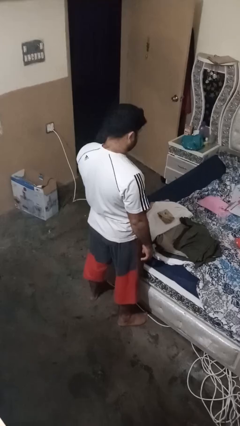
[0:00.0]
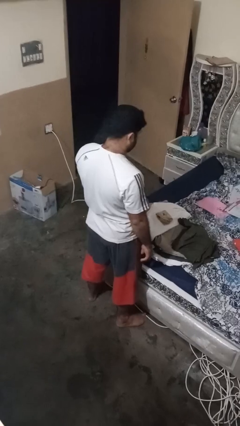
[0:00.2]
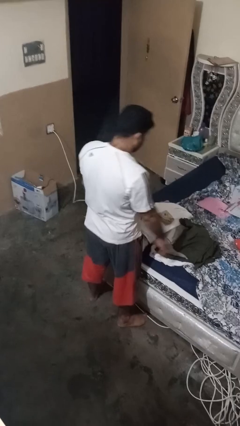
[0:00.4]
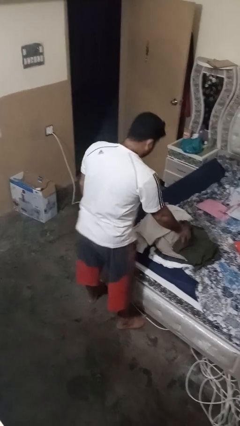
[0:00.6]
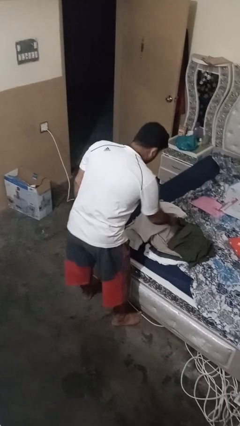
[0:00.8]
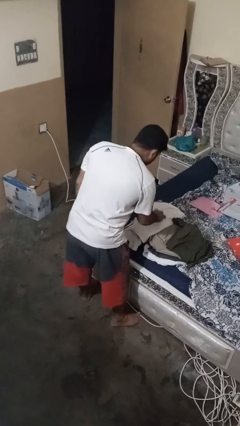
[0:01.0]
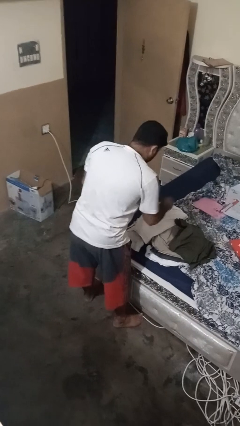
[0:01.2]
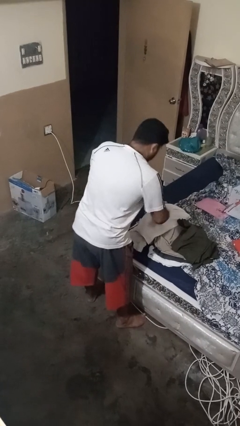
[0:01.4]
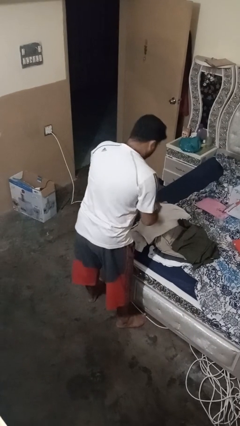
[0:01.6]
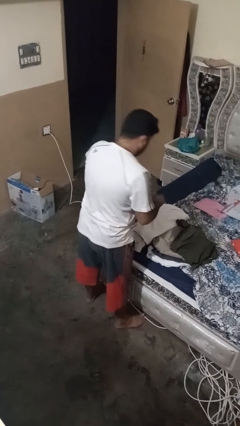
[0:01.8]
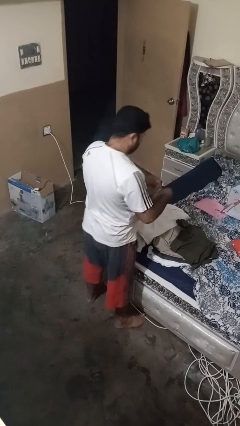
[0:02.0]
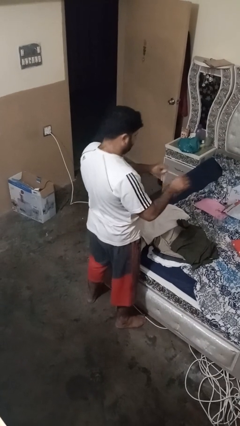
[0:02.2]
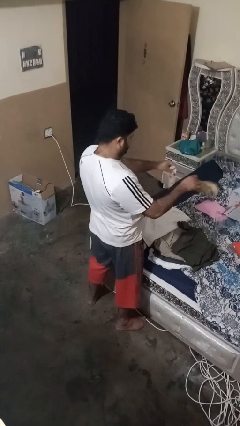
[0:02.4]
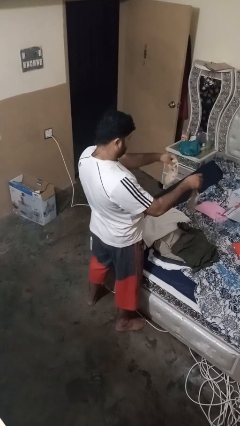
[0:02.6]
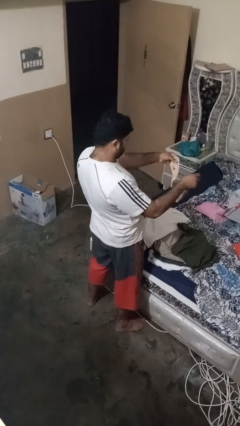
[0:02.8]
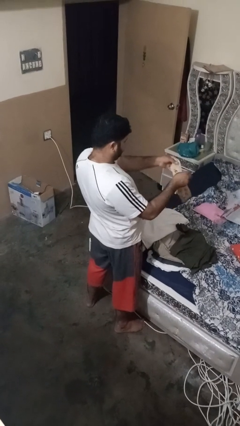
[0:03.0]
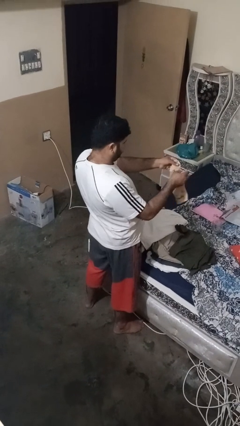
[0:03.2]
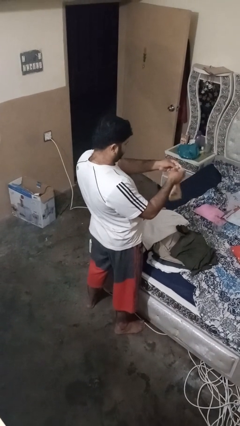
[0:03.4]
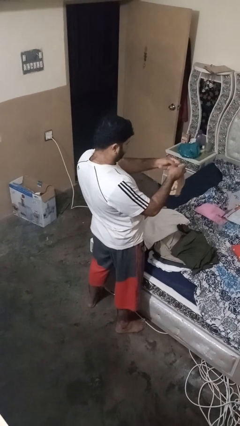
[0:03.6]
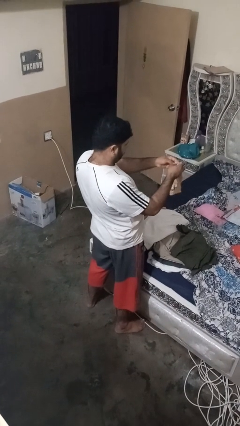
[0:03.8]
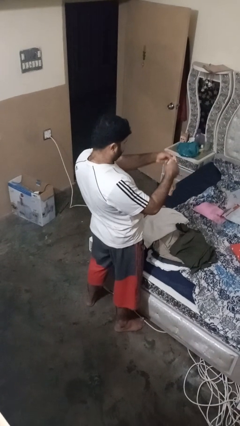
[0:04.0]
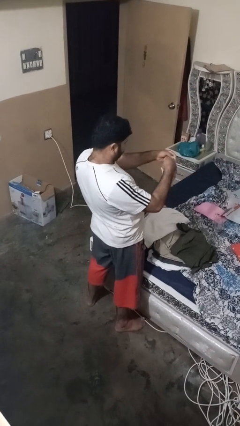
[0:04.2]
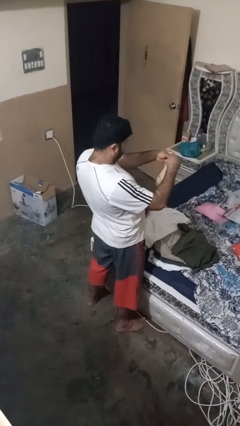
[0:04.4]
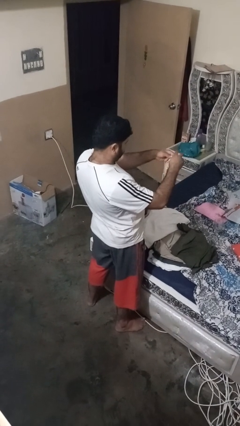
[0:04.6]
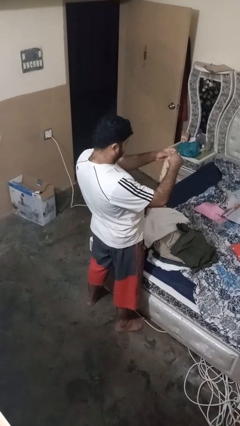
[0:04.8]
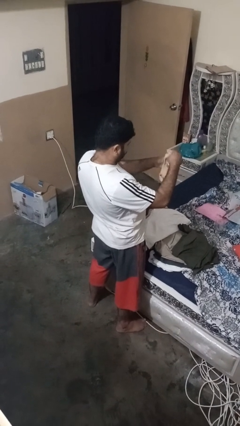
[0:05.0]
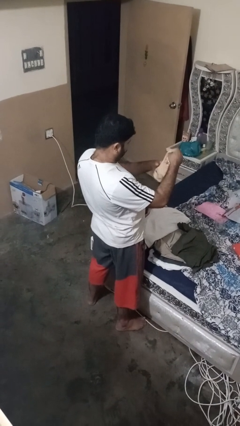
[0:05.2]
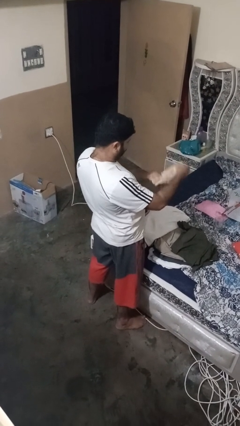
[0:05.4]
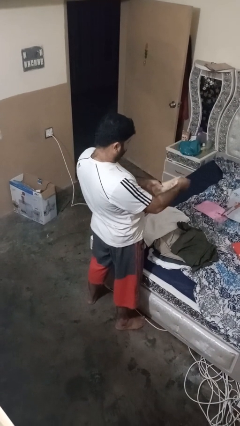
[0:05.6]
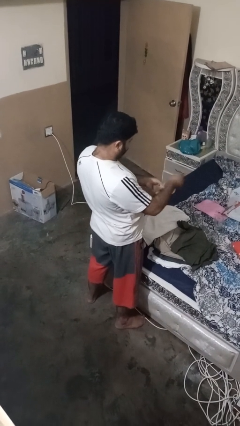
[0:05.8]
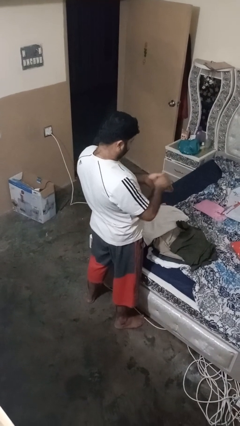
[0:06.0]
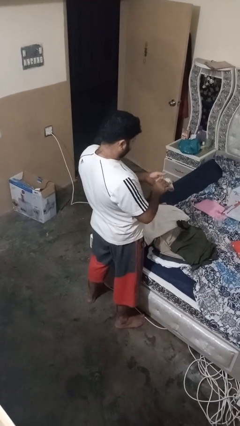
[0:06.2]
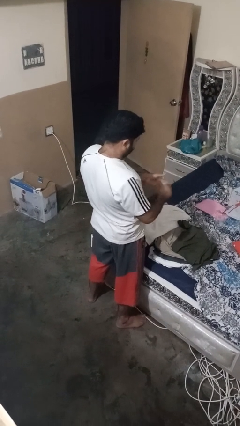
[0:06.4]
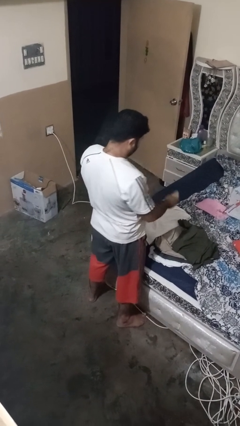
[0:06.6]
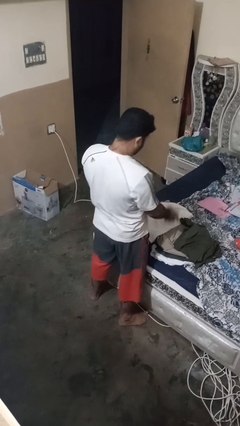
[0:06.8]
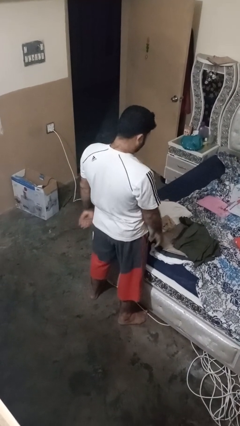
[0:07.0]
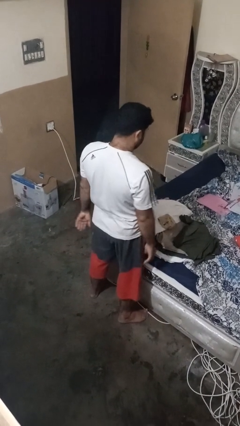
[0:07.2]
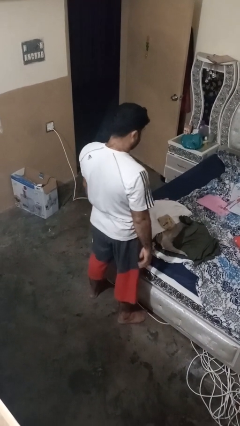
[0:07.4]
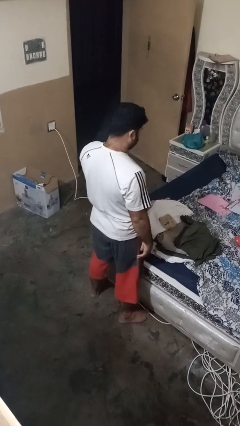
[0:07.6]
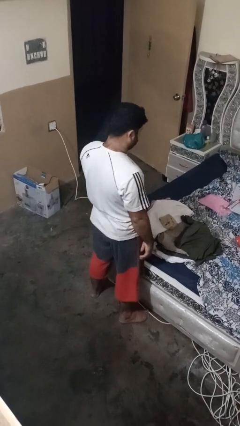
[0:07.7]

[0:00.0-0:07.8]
person folds socks

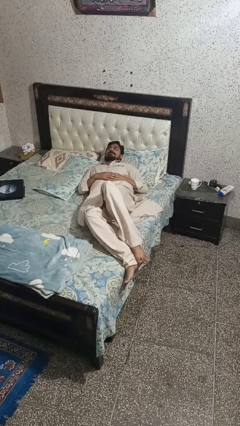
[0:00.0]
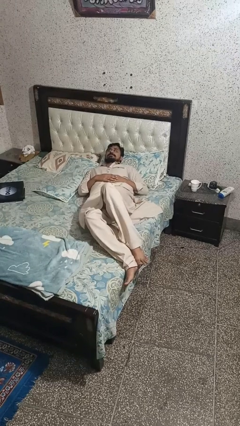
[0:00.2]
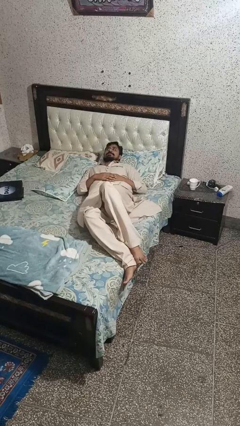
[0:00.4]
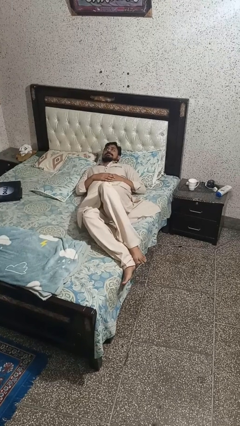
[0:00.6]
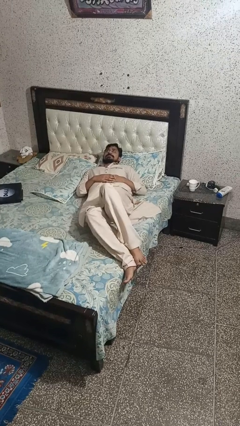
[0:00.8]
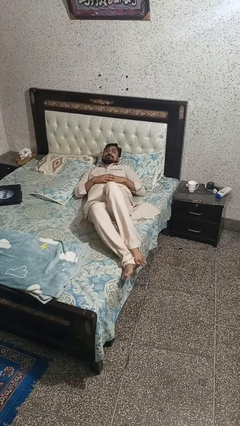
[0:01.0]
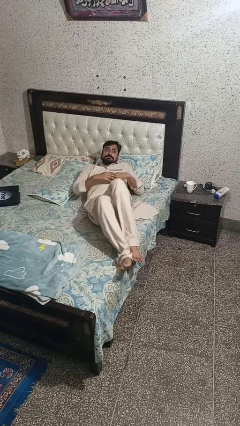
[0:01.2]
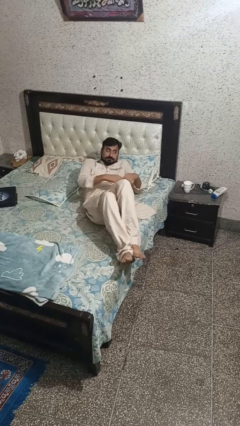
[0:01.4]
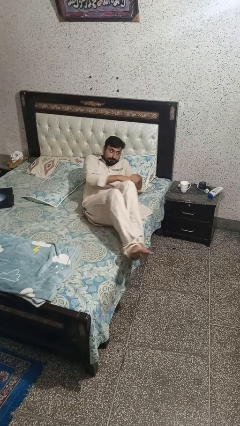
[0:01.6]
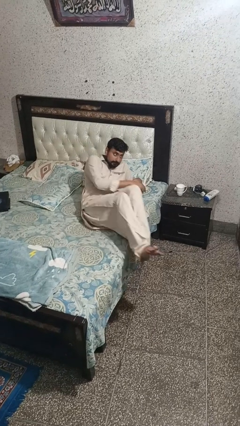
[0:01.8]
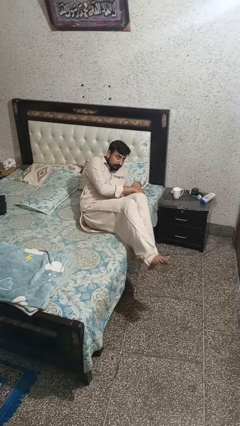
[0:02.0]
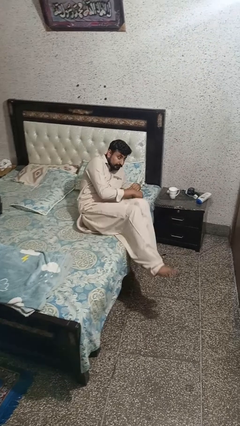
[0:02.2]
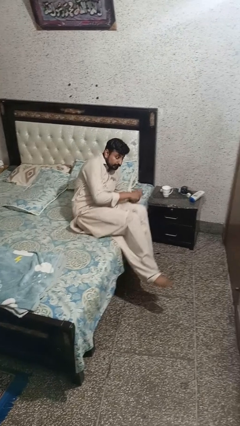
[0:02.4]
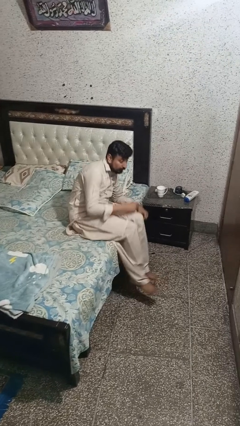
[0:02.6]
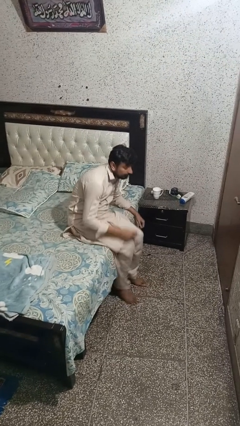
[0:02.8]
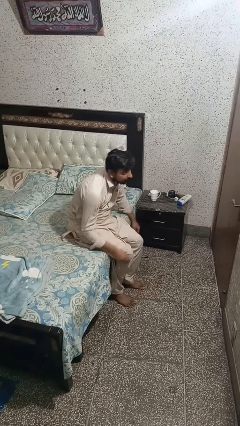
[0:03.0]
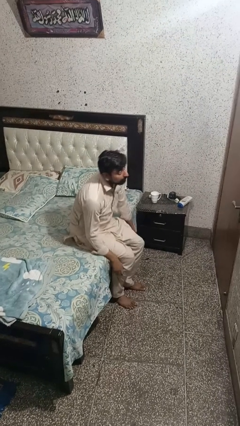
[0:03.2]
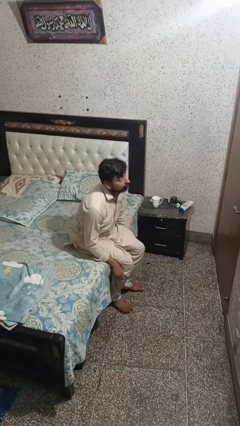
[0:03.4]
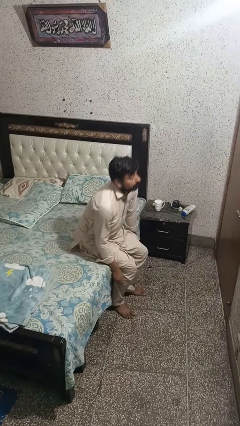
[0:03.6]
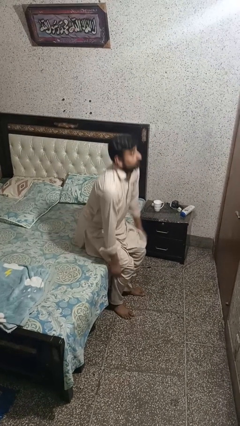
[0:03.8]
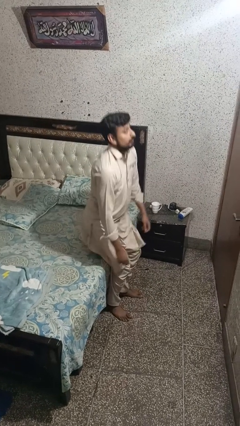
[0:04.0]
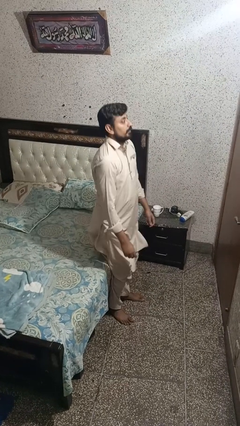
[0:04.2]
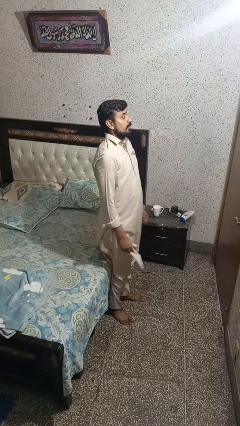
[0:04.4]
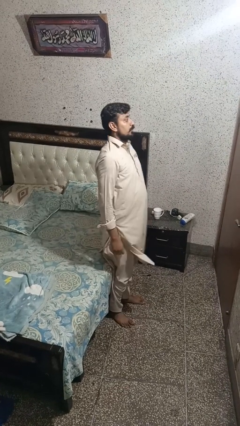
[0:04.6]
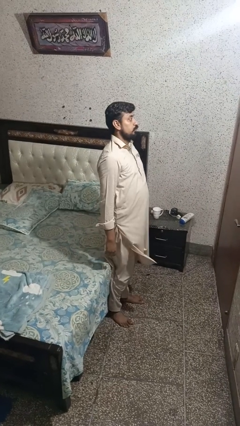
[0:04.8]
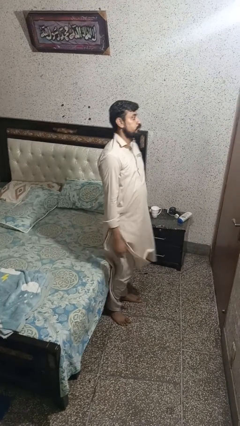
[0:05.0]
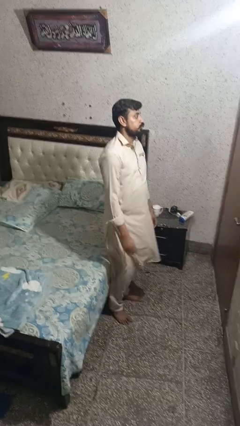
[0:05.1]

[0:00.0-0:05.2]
person stands up

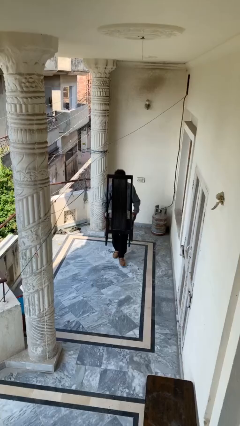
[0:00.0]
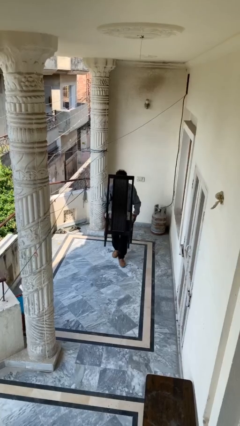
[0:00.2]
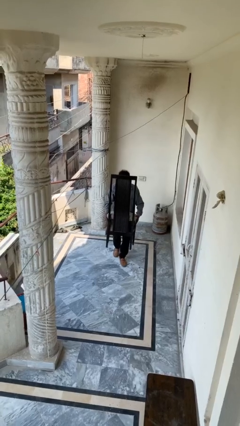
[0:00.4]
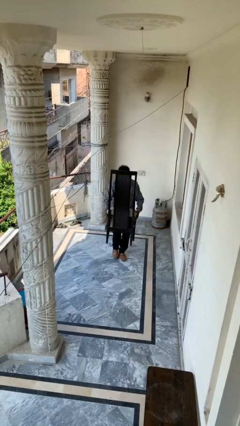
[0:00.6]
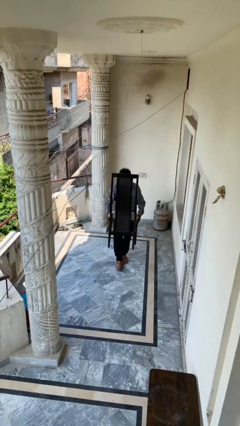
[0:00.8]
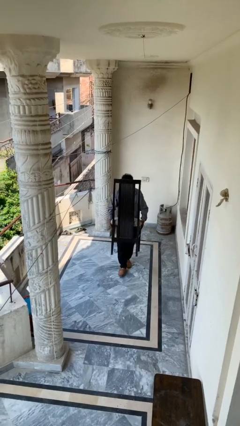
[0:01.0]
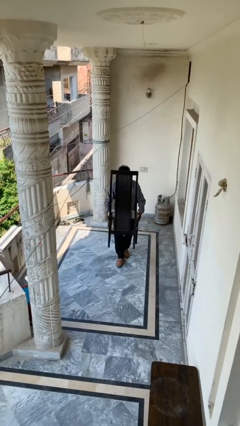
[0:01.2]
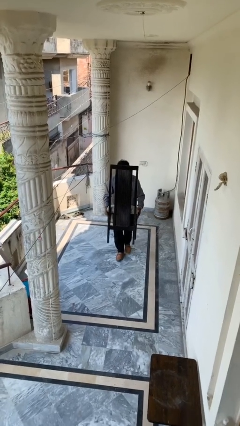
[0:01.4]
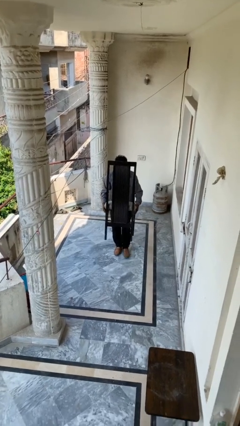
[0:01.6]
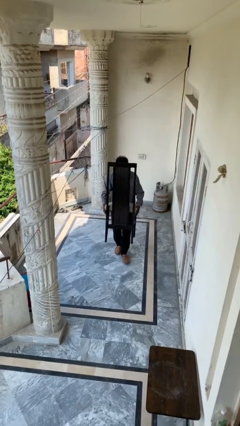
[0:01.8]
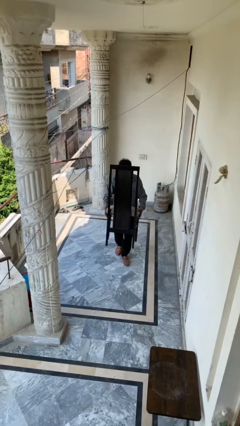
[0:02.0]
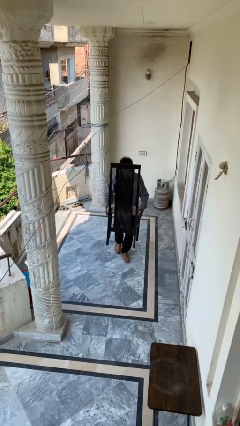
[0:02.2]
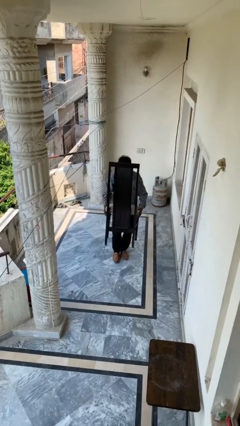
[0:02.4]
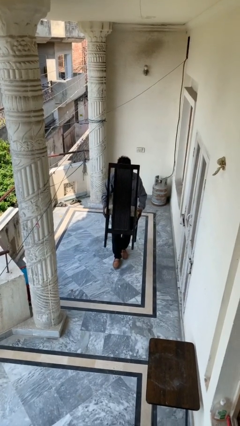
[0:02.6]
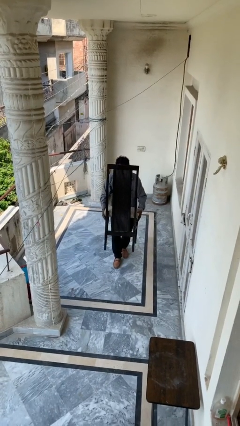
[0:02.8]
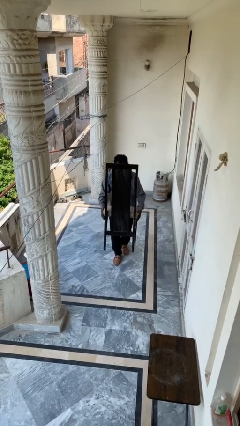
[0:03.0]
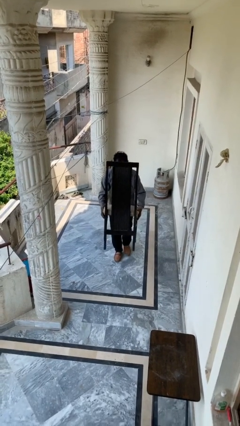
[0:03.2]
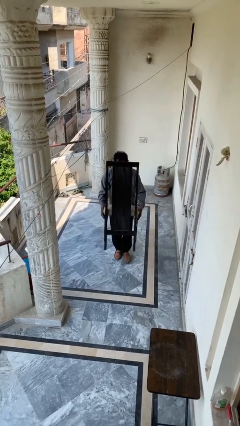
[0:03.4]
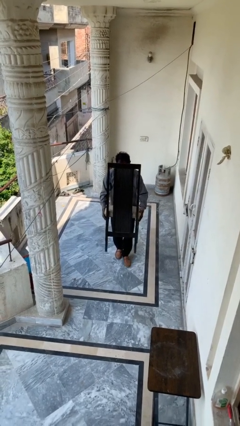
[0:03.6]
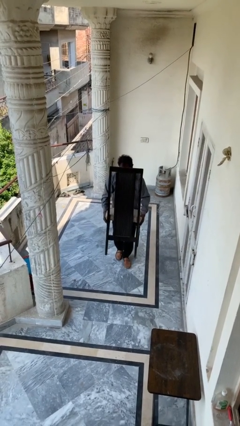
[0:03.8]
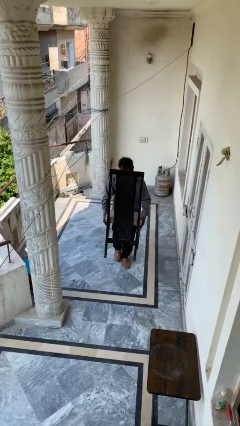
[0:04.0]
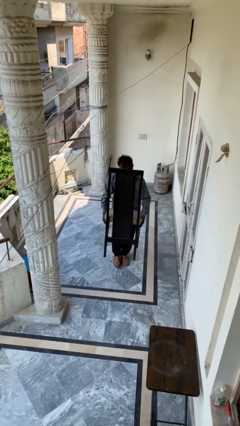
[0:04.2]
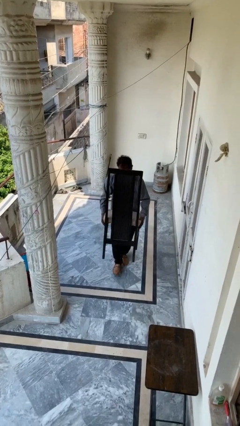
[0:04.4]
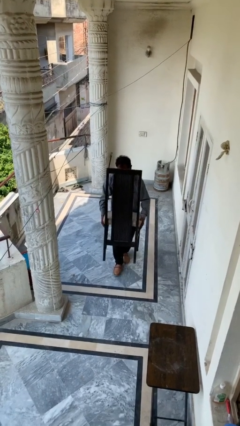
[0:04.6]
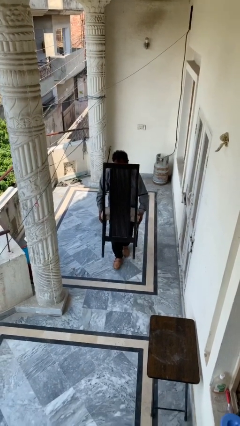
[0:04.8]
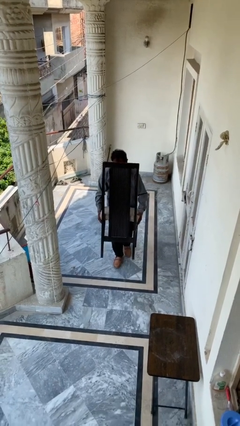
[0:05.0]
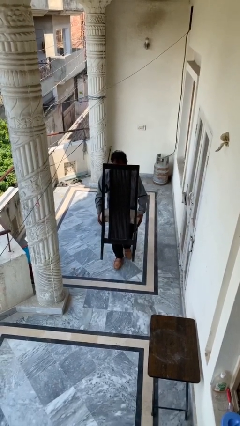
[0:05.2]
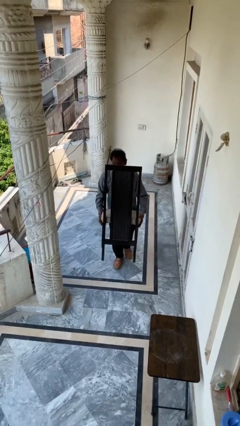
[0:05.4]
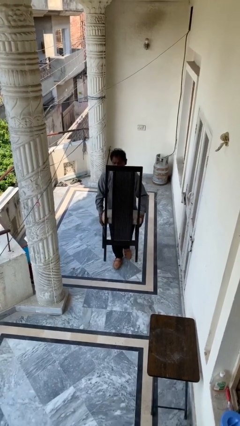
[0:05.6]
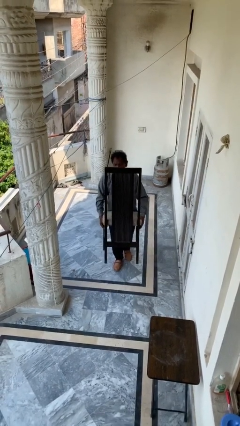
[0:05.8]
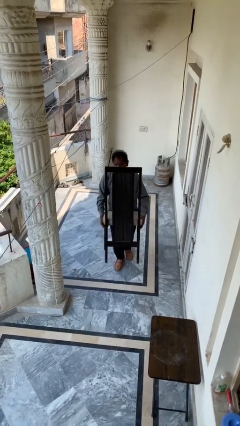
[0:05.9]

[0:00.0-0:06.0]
person carries heavy object
